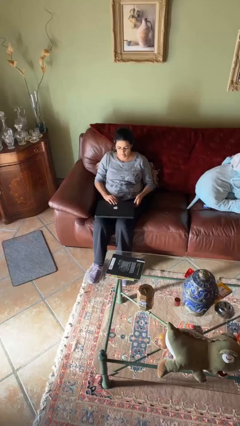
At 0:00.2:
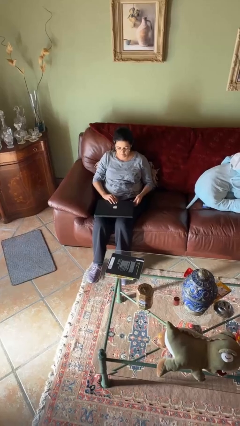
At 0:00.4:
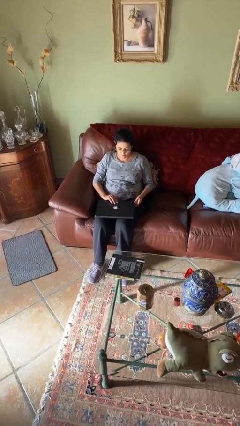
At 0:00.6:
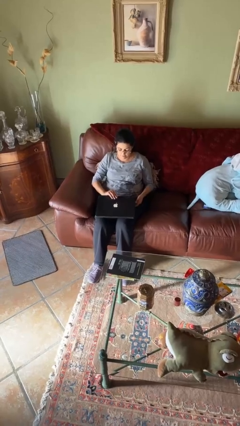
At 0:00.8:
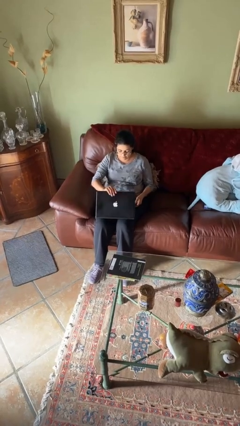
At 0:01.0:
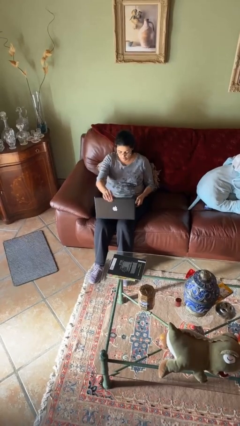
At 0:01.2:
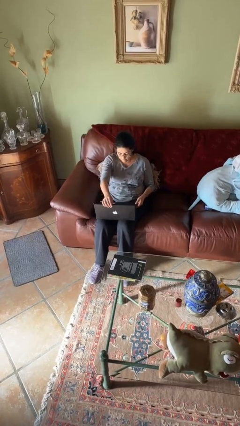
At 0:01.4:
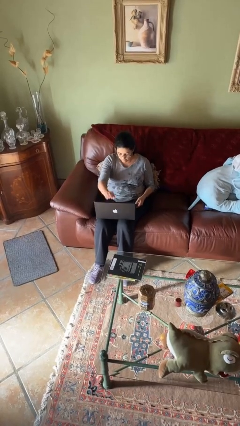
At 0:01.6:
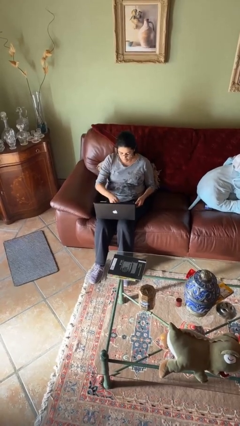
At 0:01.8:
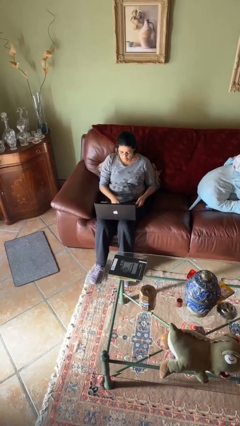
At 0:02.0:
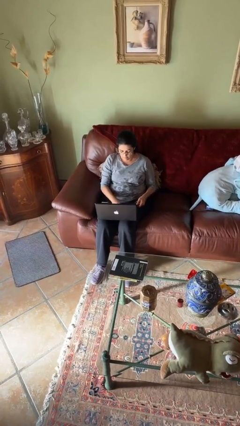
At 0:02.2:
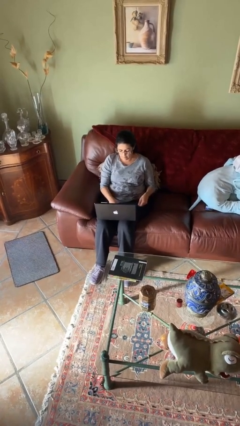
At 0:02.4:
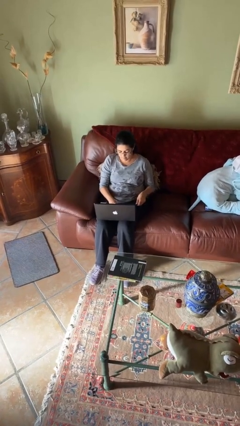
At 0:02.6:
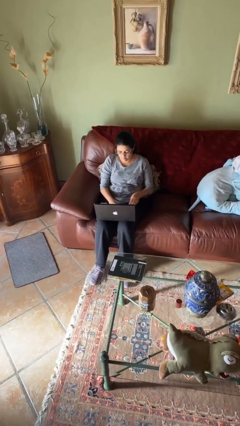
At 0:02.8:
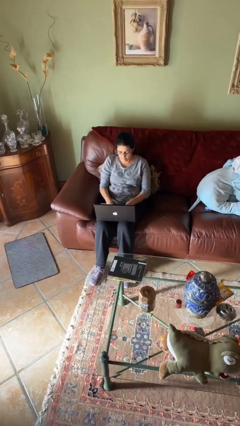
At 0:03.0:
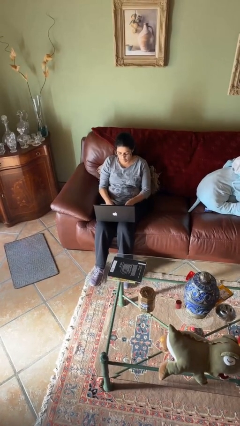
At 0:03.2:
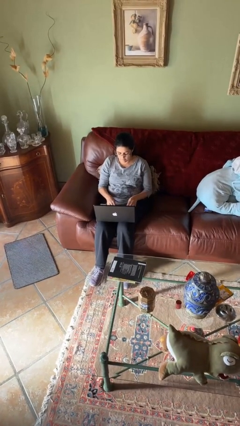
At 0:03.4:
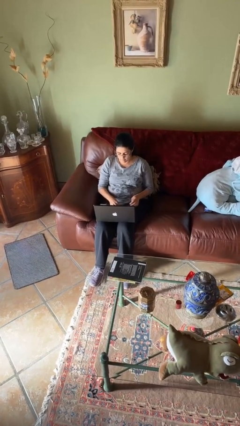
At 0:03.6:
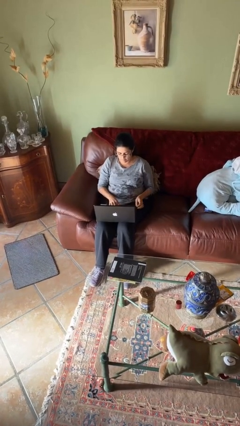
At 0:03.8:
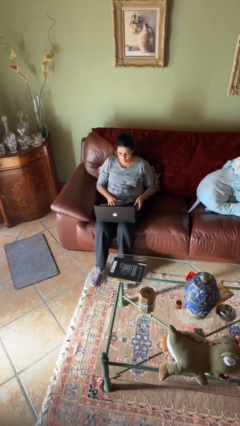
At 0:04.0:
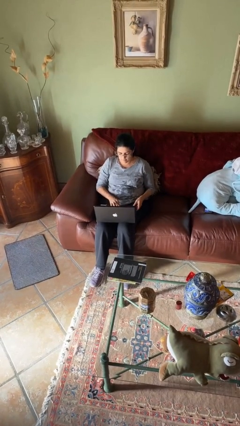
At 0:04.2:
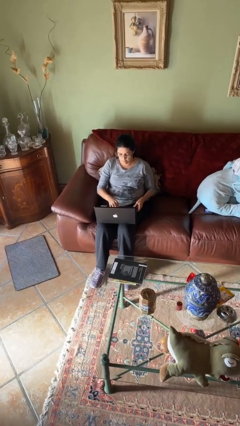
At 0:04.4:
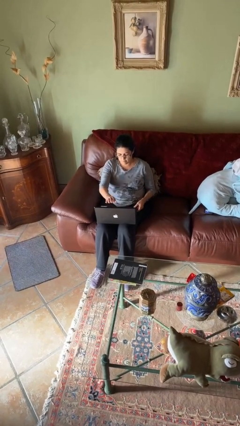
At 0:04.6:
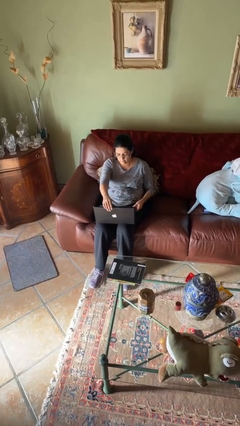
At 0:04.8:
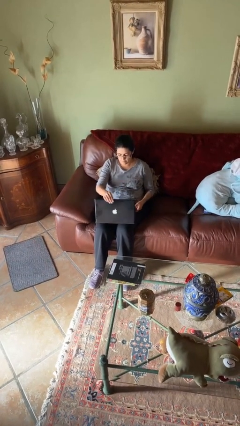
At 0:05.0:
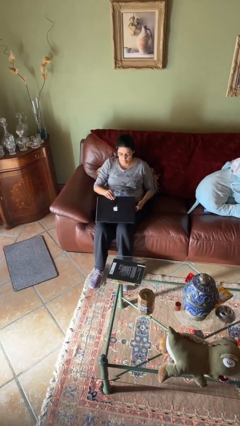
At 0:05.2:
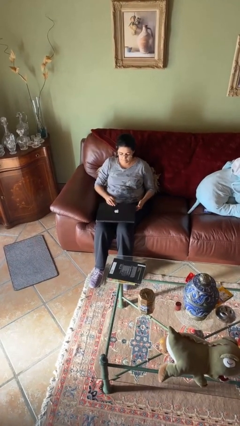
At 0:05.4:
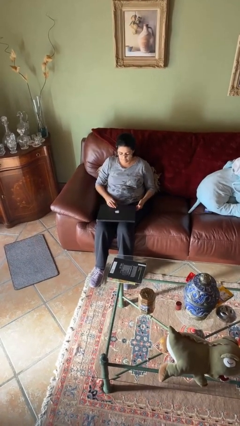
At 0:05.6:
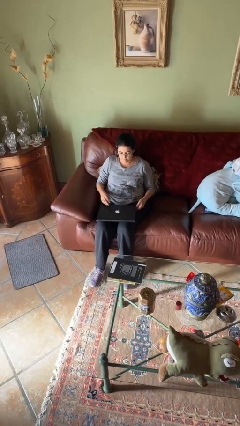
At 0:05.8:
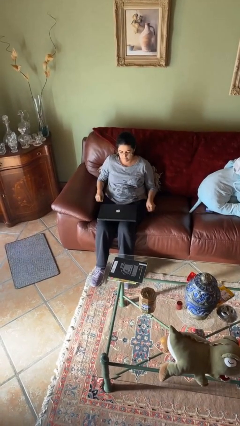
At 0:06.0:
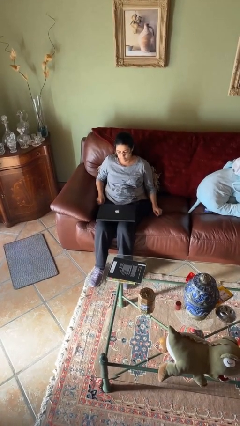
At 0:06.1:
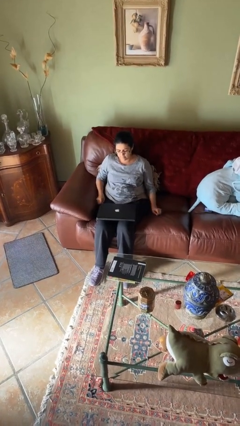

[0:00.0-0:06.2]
person interacts with laptop

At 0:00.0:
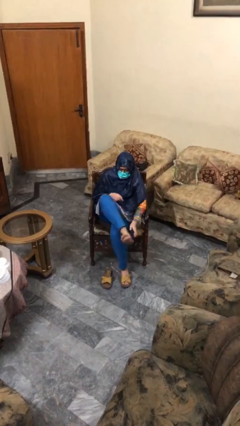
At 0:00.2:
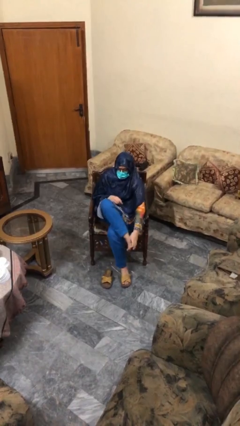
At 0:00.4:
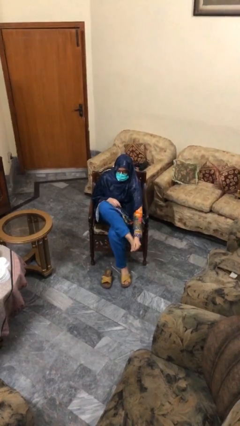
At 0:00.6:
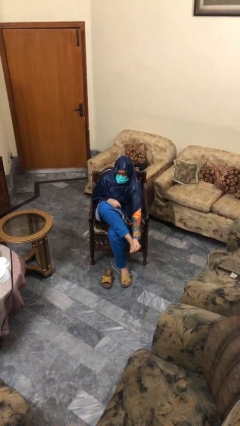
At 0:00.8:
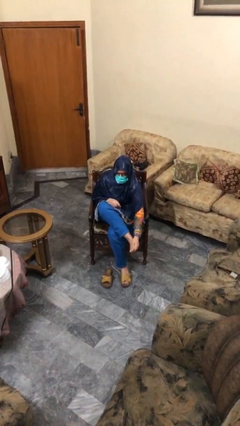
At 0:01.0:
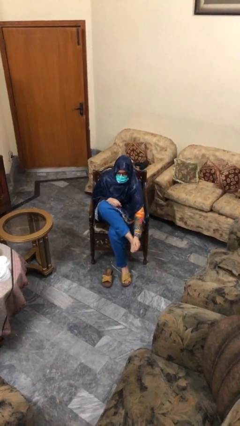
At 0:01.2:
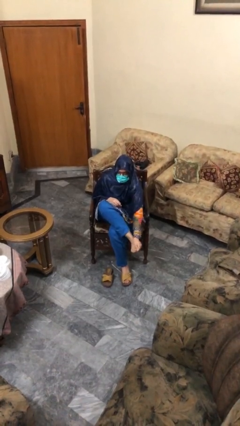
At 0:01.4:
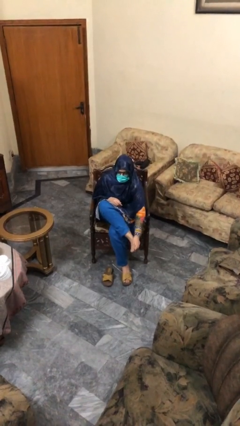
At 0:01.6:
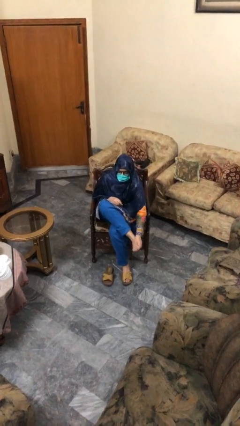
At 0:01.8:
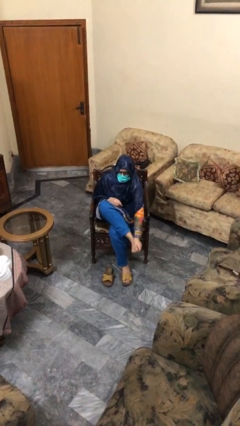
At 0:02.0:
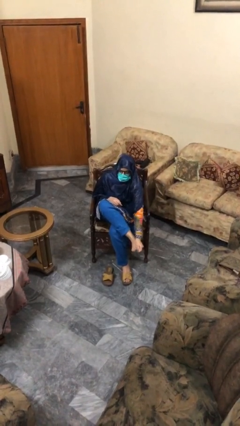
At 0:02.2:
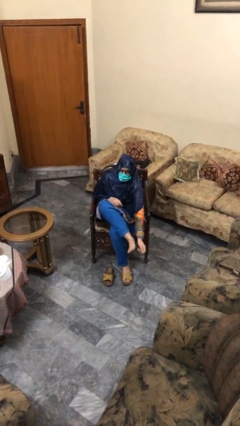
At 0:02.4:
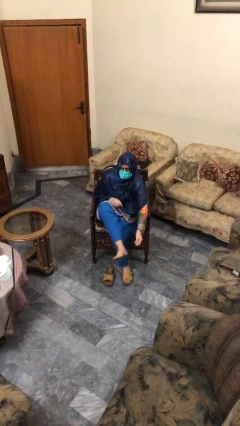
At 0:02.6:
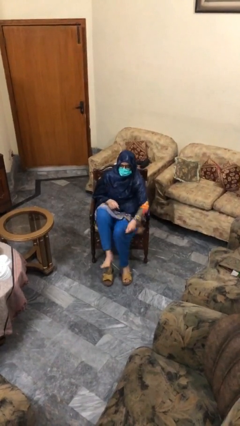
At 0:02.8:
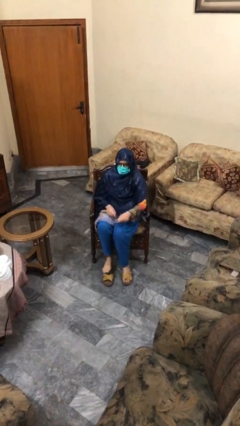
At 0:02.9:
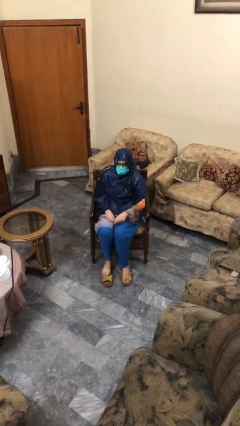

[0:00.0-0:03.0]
person rubs foot

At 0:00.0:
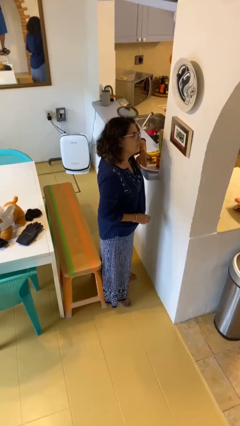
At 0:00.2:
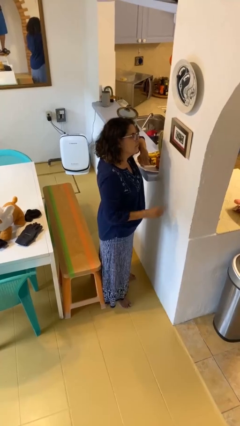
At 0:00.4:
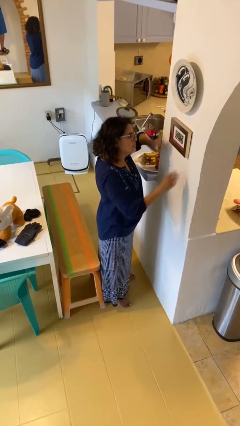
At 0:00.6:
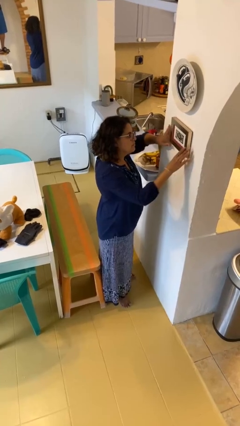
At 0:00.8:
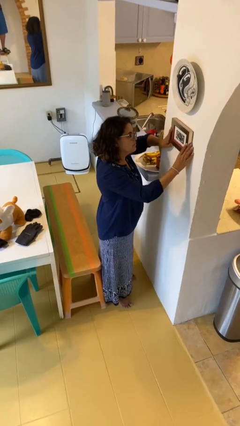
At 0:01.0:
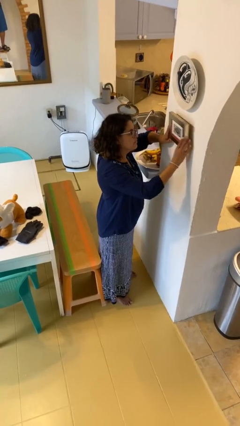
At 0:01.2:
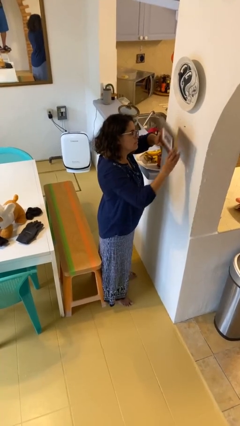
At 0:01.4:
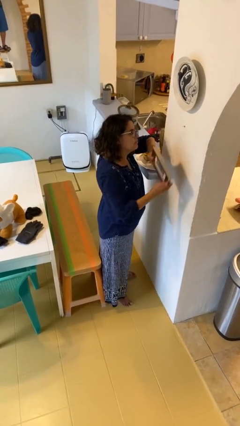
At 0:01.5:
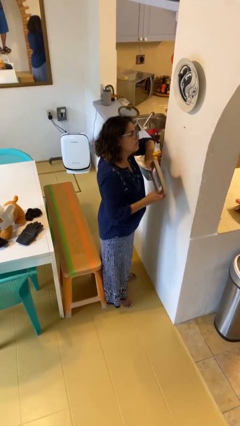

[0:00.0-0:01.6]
person takes down picture frame

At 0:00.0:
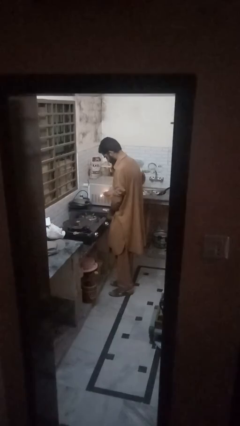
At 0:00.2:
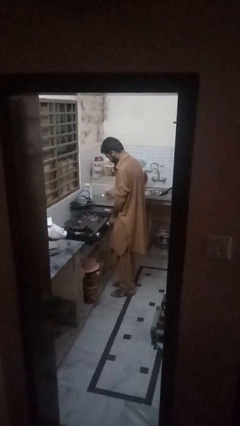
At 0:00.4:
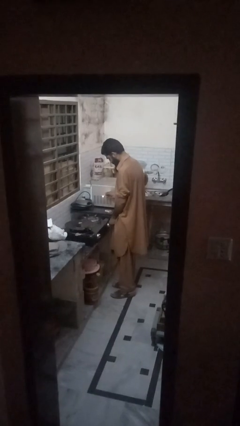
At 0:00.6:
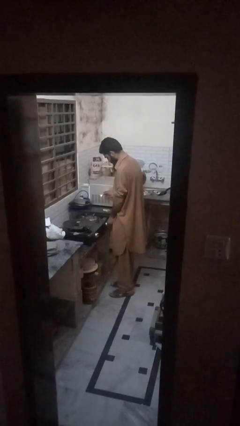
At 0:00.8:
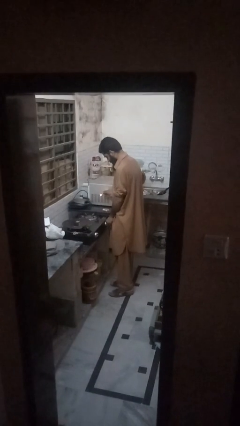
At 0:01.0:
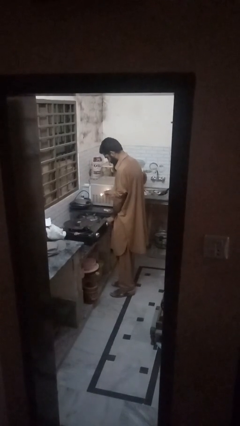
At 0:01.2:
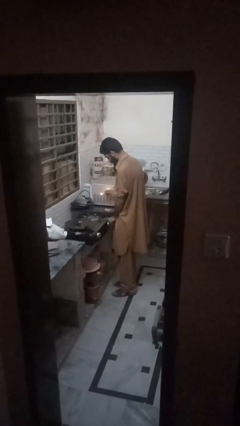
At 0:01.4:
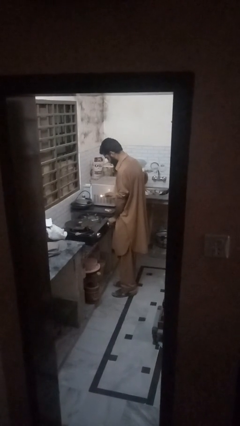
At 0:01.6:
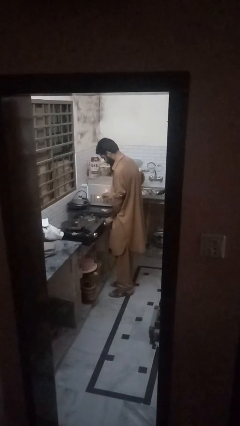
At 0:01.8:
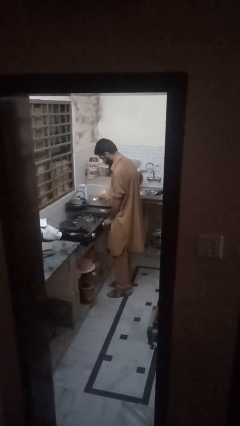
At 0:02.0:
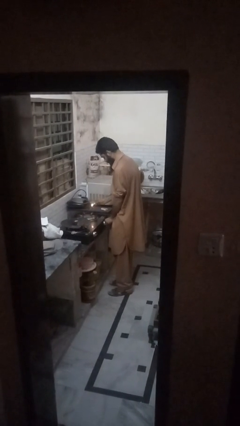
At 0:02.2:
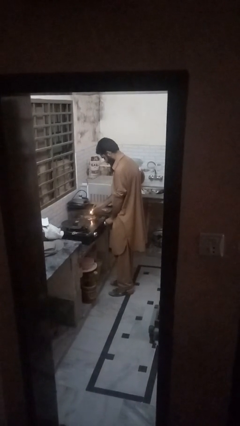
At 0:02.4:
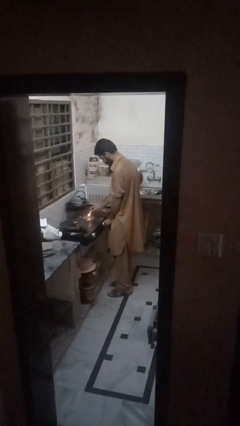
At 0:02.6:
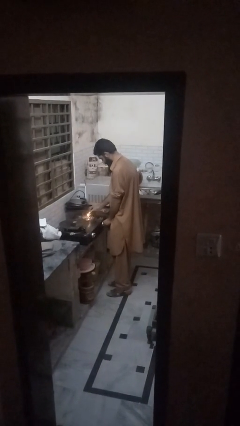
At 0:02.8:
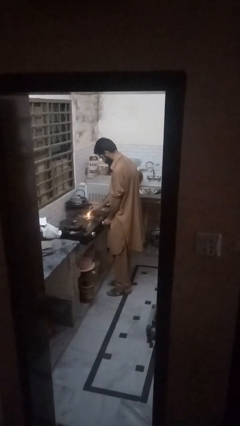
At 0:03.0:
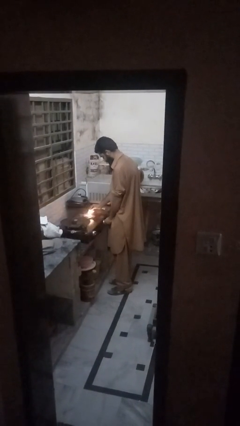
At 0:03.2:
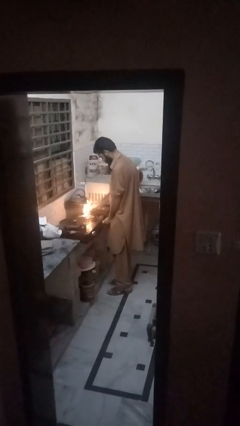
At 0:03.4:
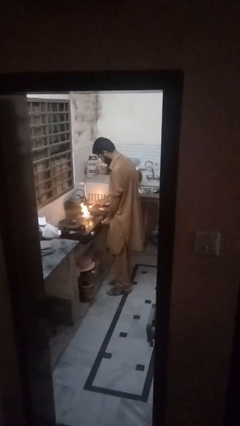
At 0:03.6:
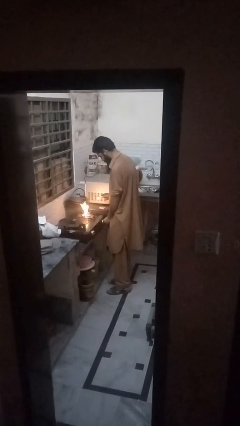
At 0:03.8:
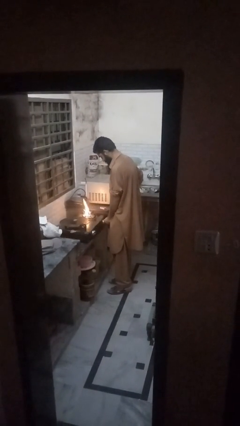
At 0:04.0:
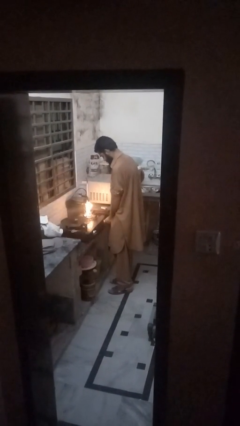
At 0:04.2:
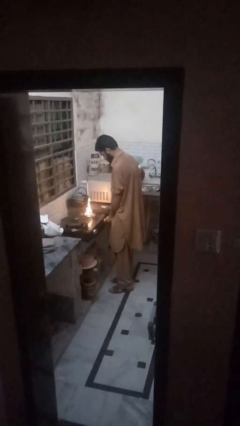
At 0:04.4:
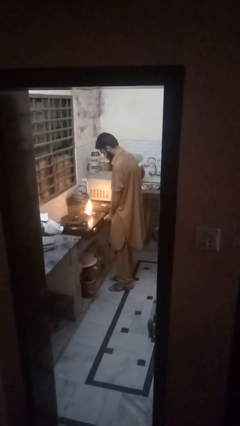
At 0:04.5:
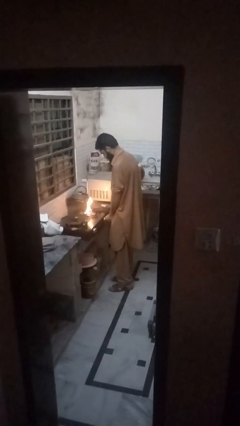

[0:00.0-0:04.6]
person turns on stovetop

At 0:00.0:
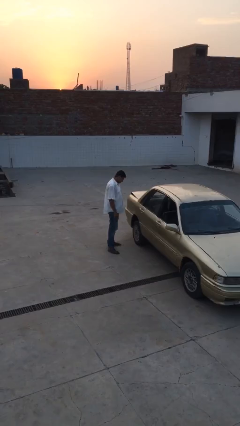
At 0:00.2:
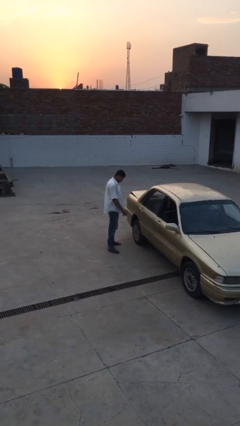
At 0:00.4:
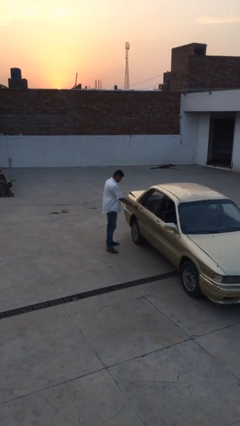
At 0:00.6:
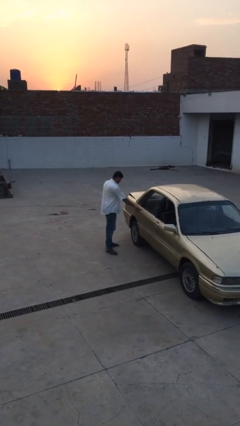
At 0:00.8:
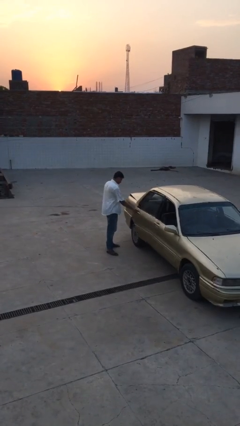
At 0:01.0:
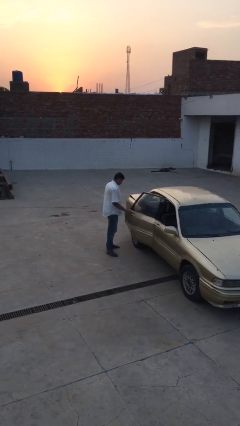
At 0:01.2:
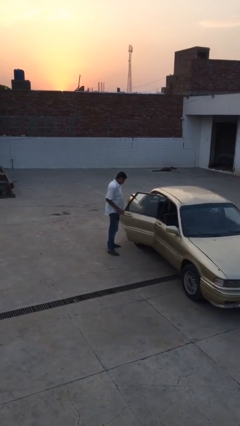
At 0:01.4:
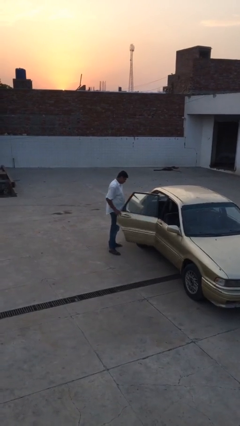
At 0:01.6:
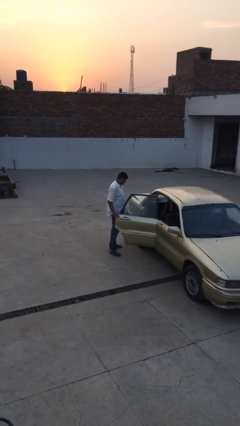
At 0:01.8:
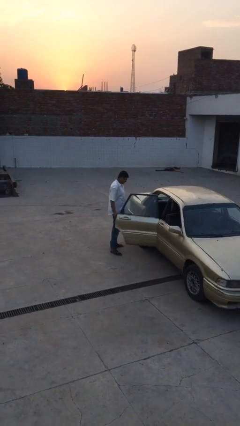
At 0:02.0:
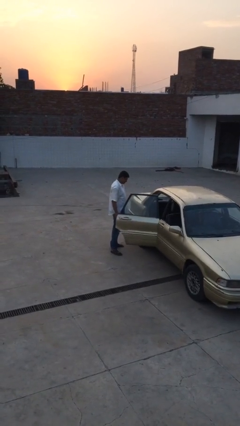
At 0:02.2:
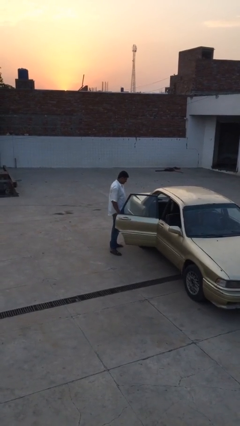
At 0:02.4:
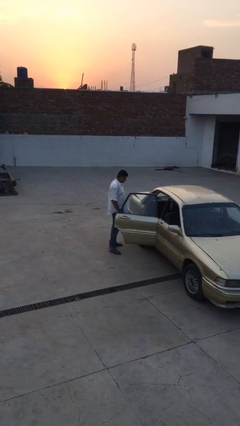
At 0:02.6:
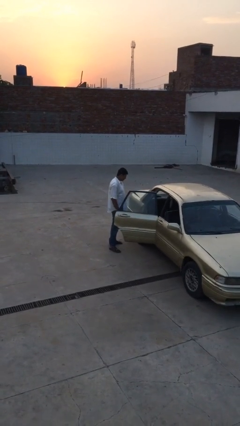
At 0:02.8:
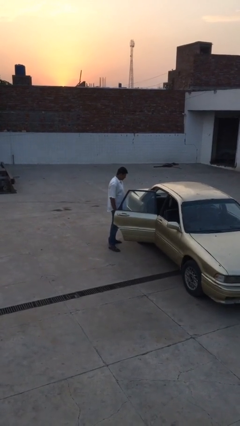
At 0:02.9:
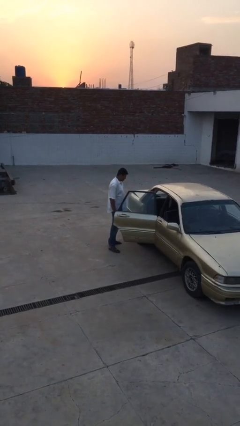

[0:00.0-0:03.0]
person opens car door
